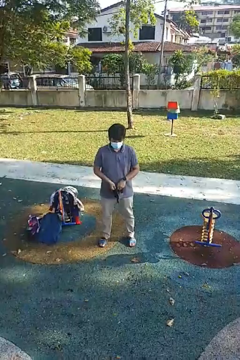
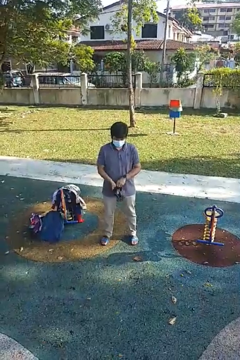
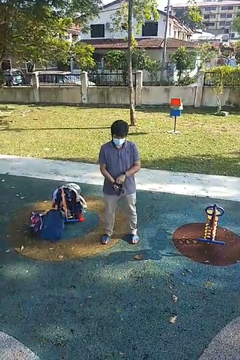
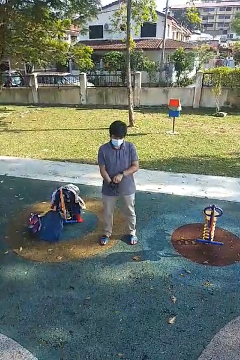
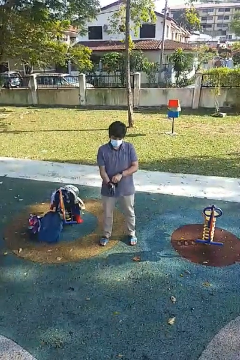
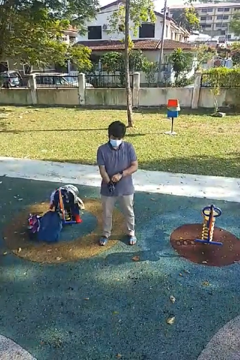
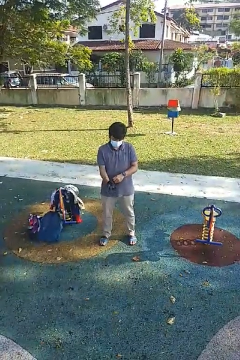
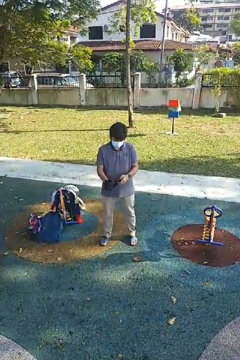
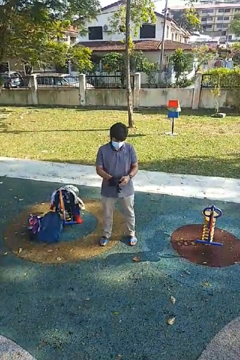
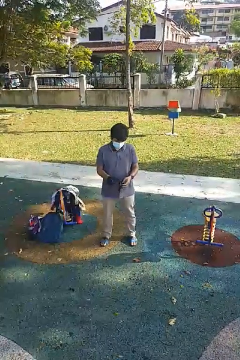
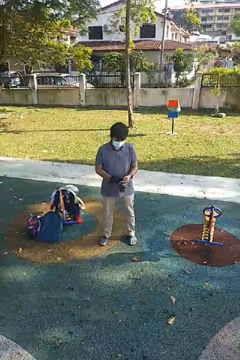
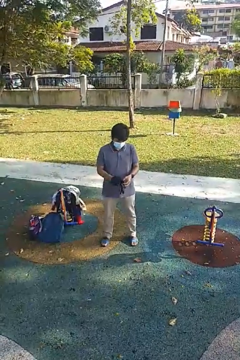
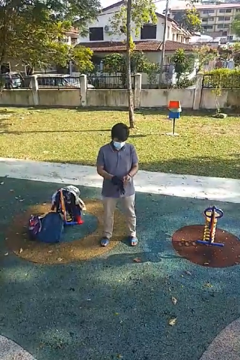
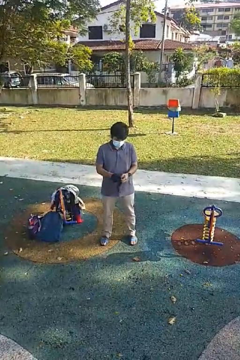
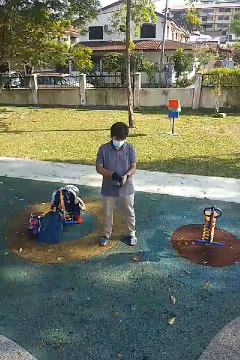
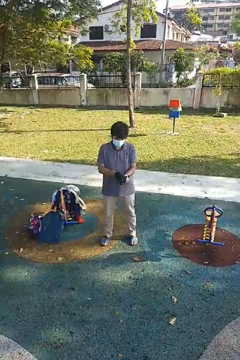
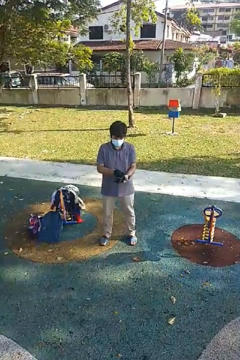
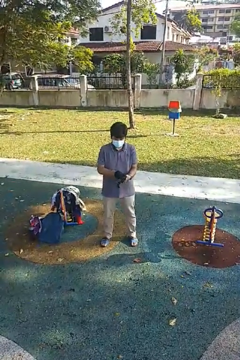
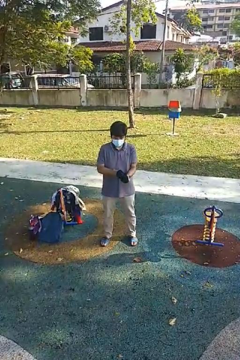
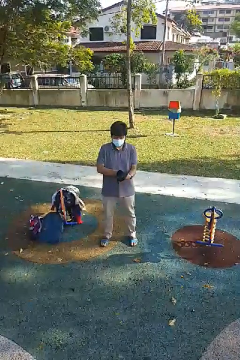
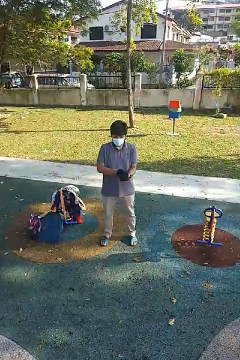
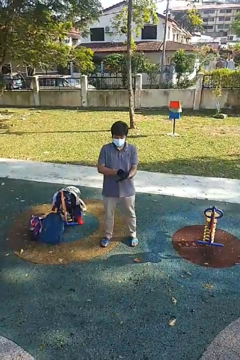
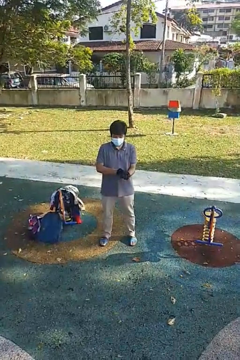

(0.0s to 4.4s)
person puts on gloves

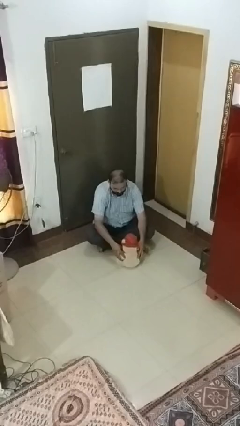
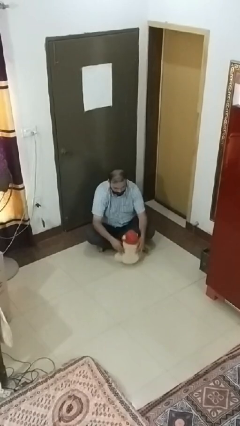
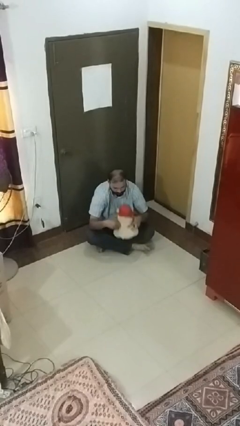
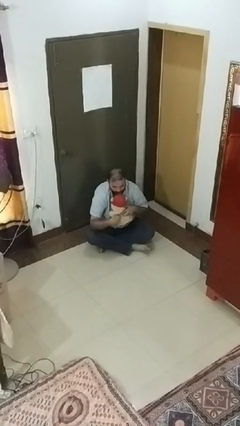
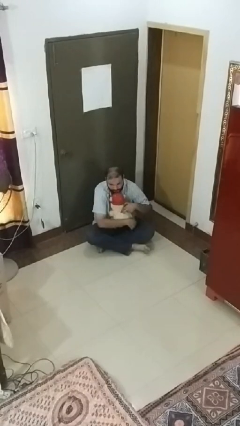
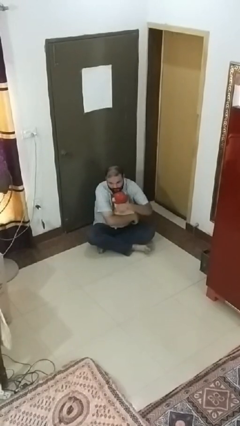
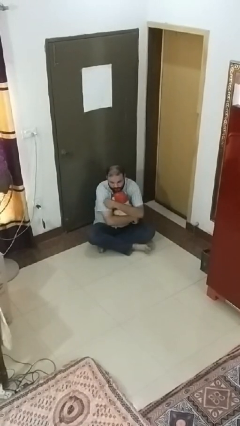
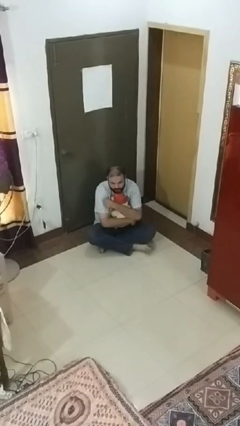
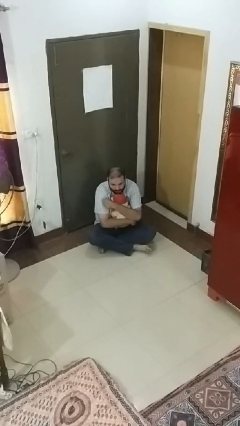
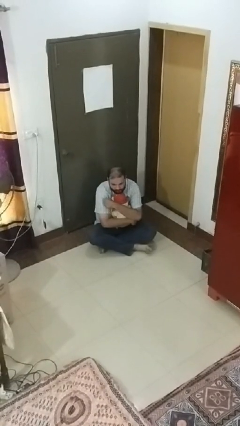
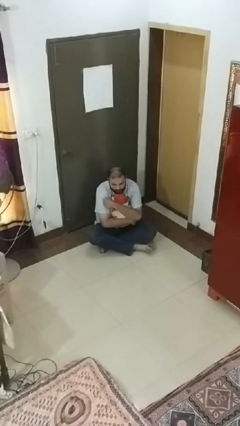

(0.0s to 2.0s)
person hugs stuffed animal

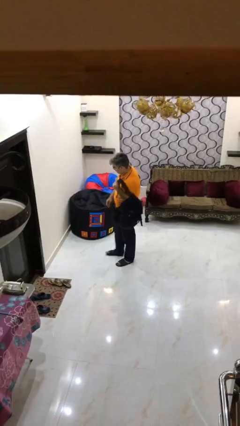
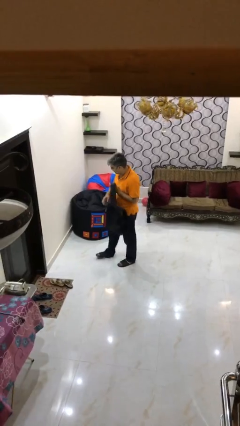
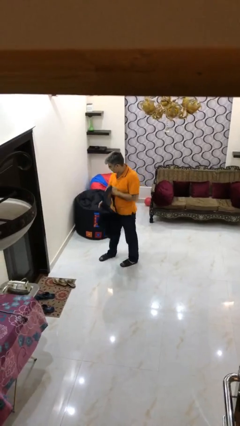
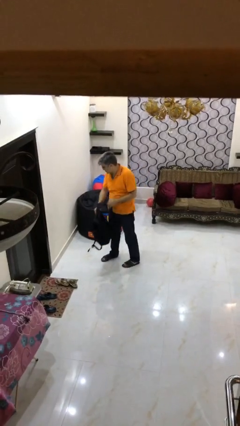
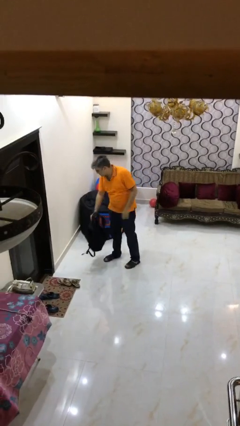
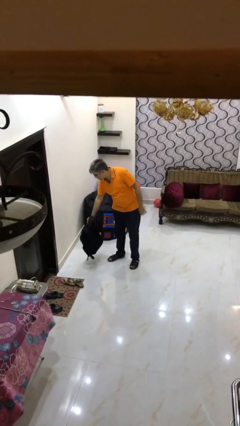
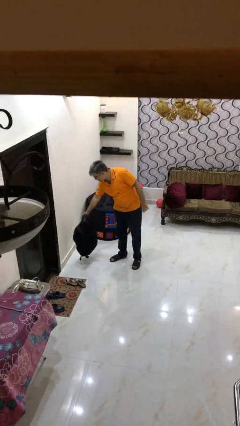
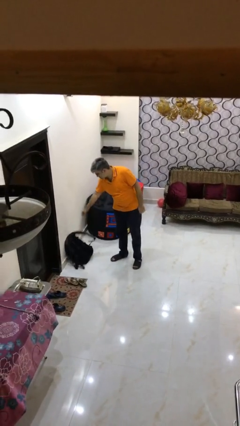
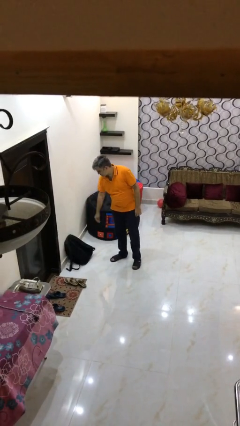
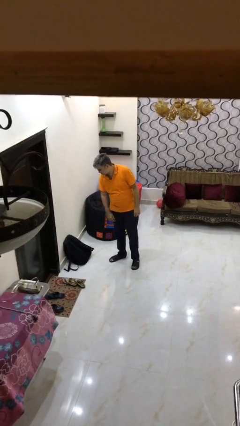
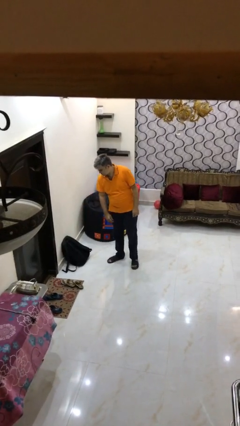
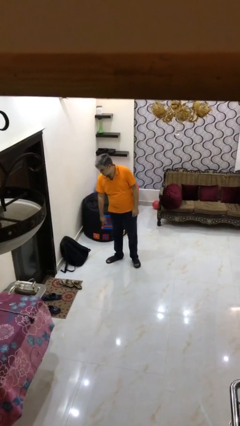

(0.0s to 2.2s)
person puts down object on floor

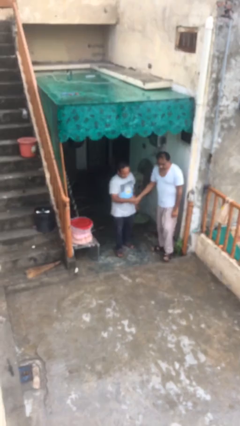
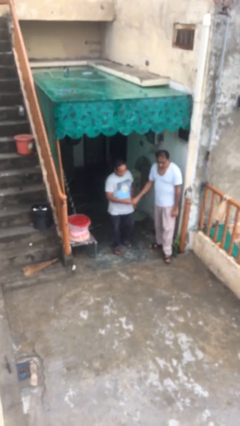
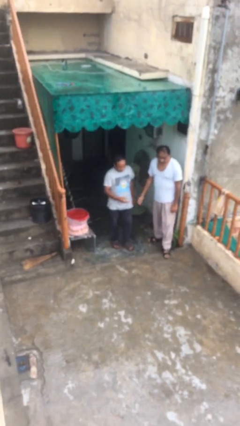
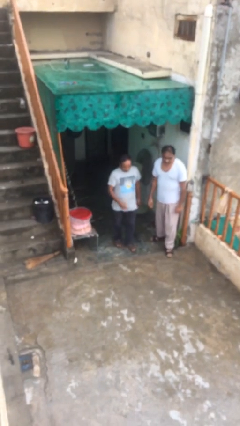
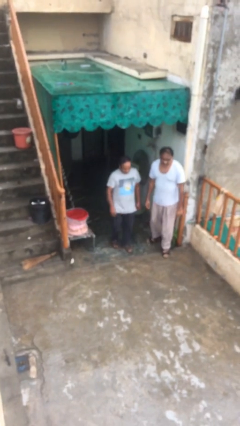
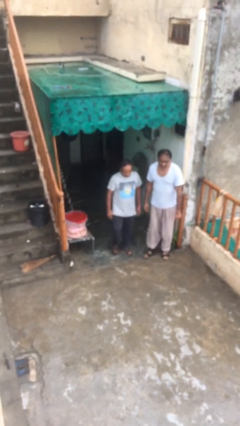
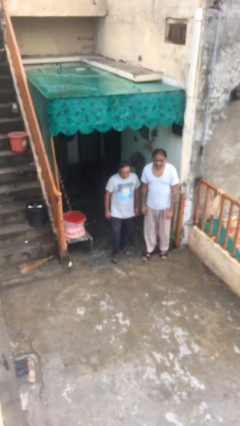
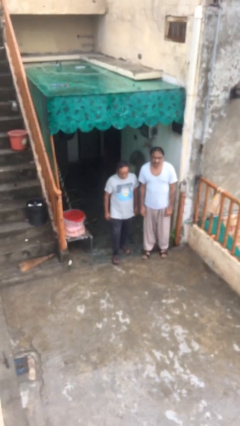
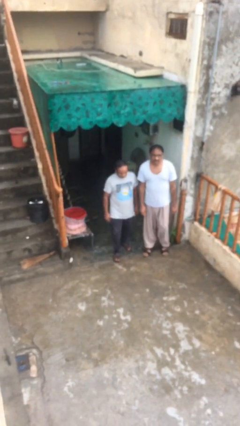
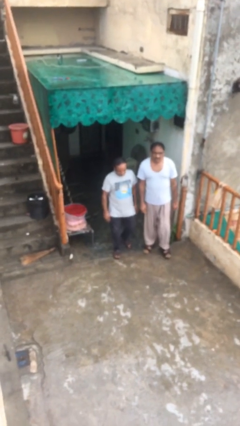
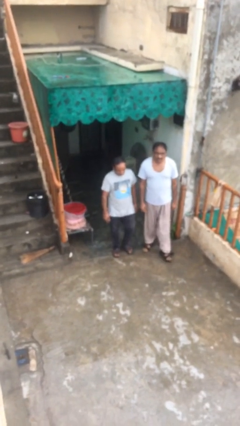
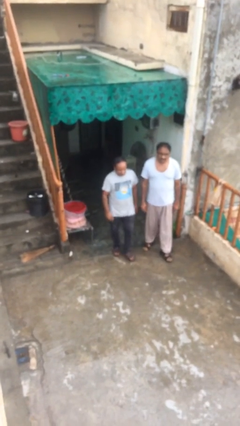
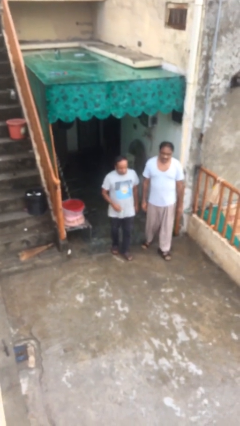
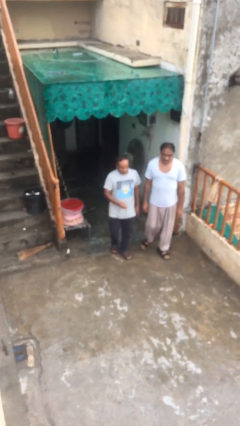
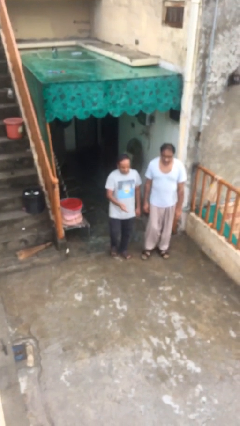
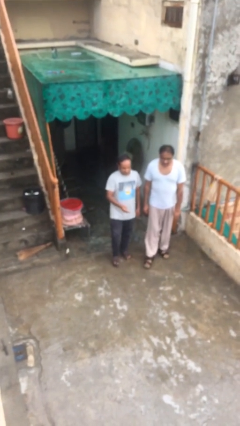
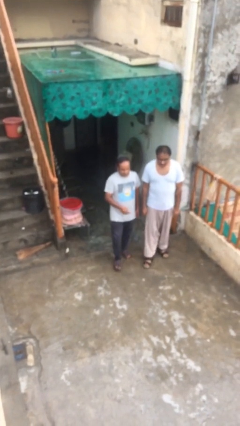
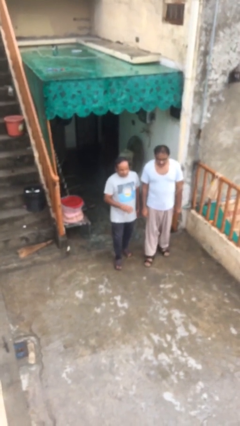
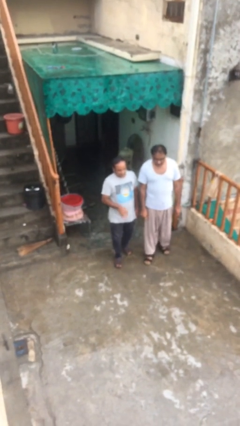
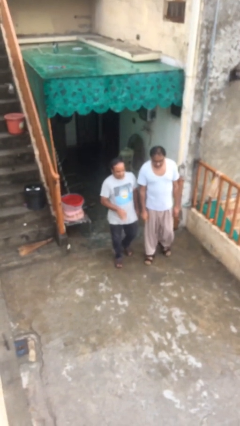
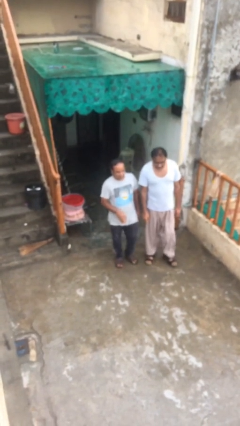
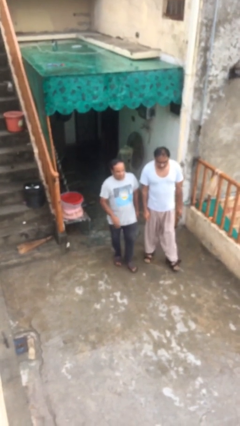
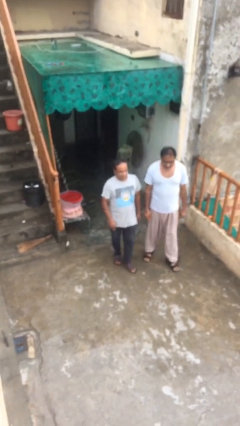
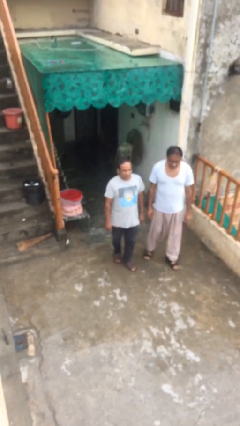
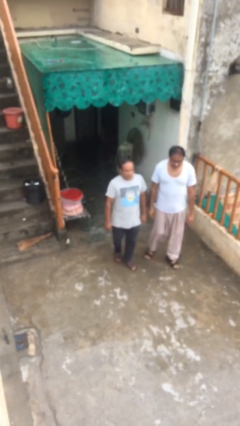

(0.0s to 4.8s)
person talks to person

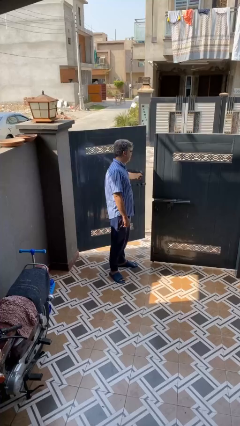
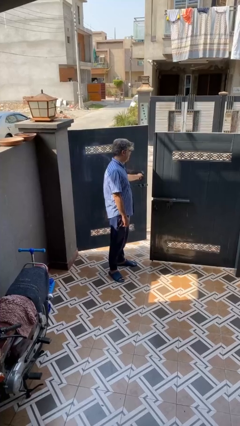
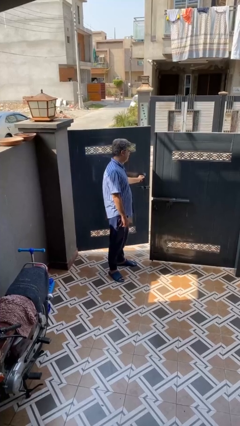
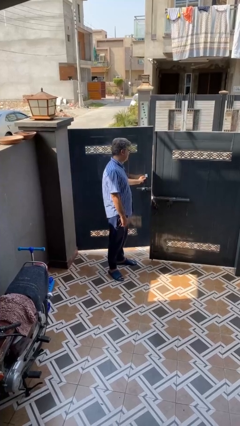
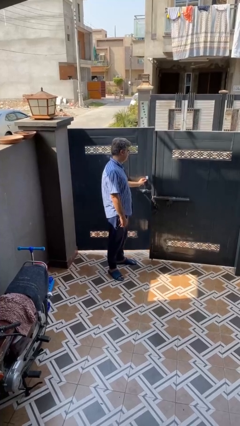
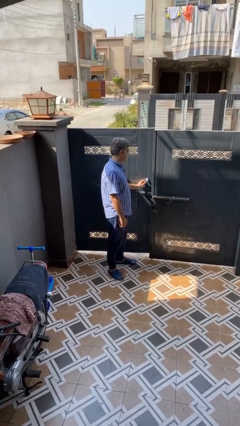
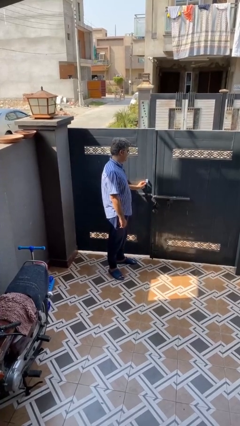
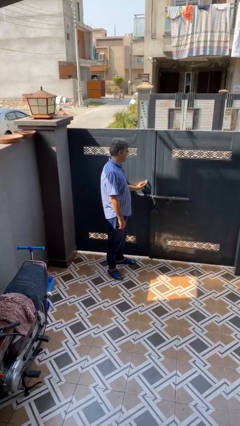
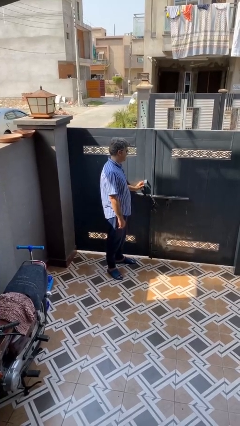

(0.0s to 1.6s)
person closes gate

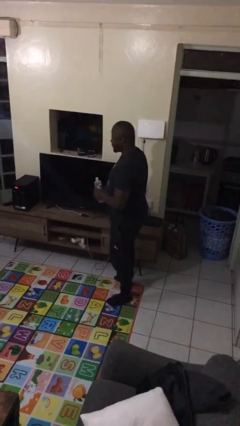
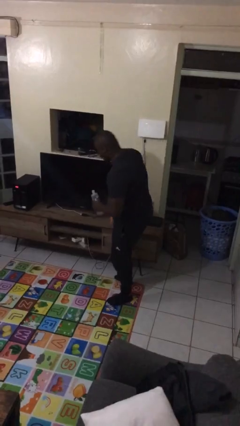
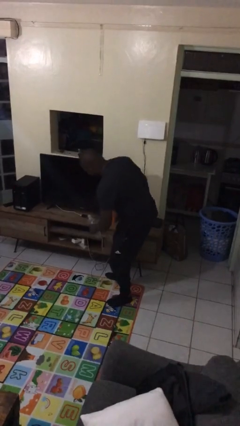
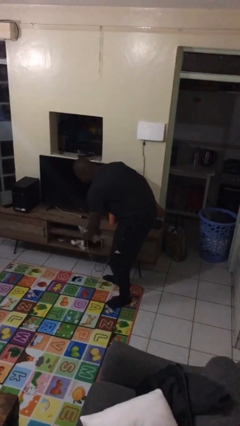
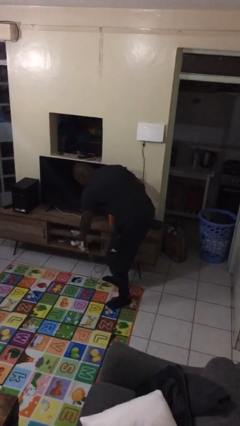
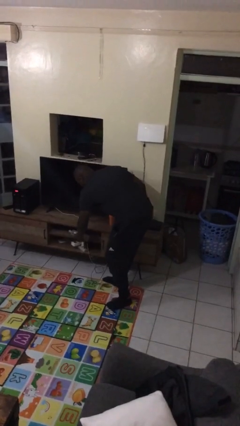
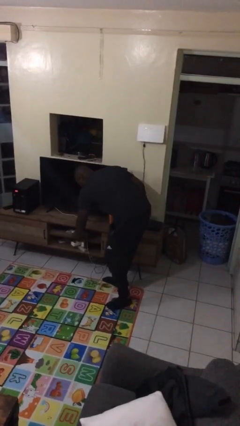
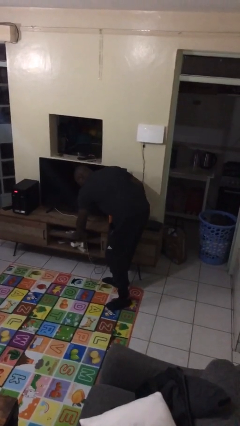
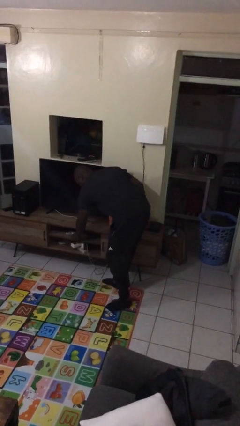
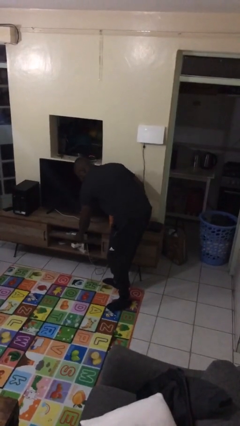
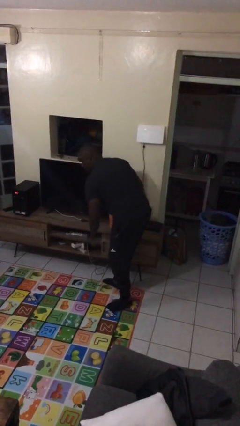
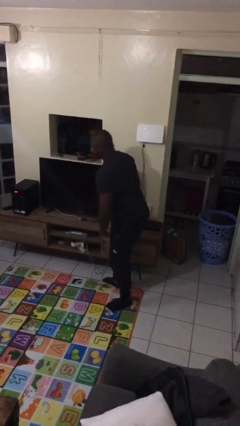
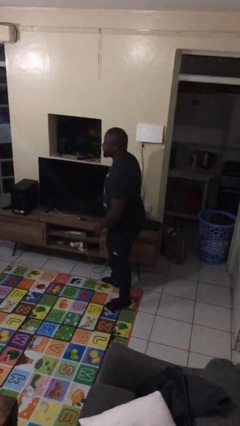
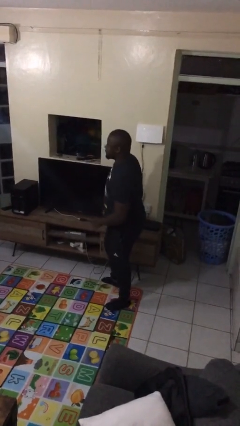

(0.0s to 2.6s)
person puts down object into cabinet

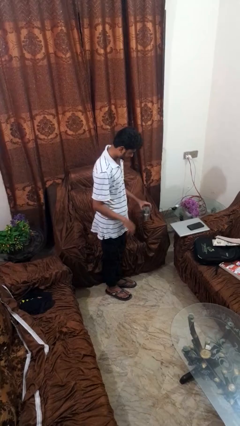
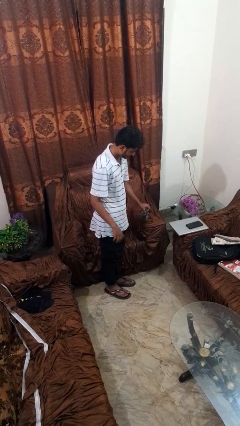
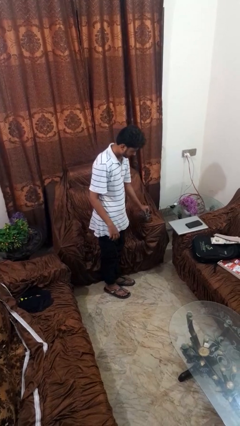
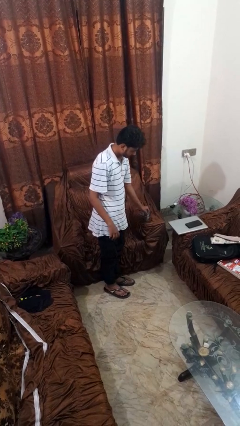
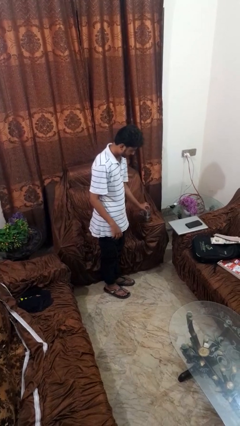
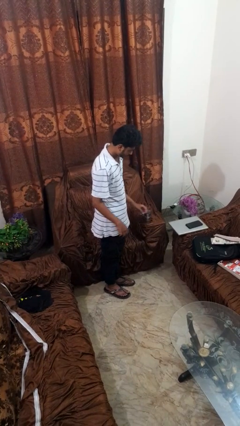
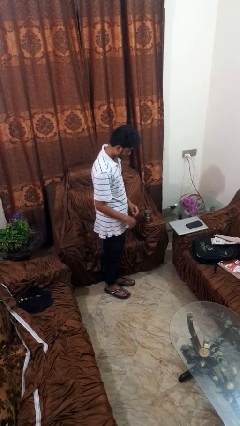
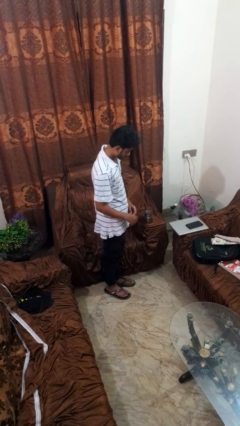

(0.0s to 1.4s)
person puts down object on couch
